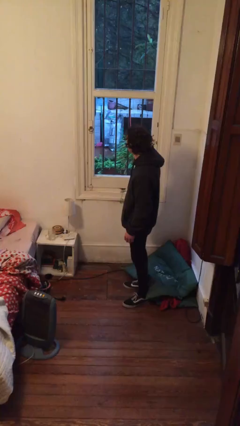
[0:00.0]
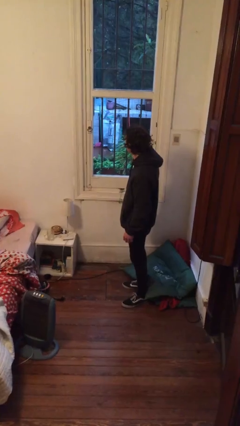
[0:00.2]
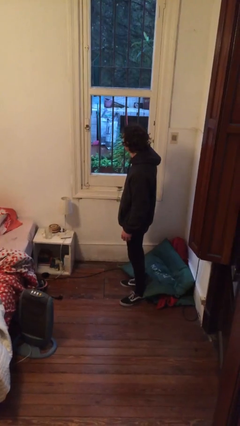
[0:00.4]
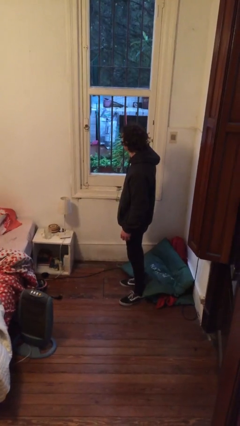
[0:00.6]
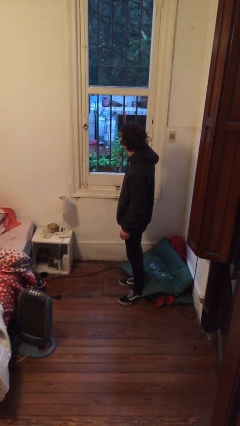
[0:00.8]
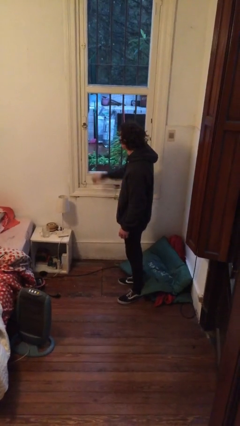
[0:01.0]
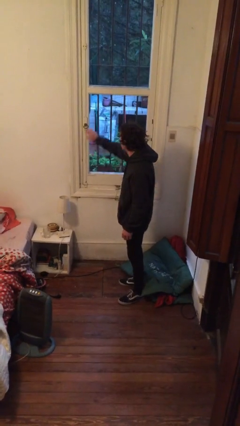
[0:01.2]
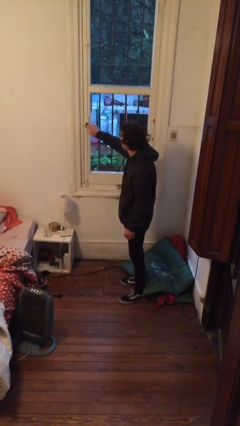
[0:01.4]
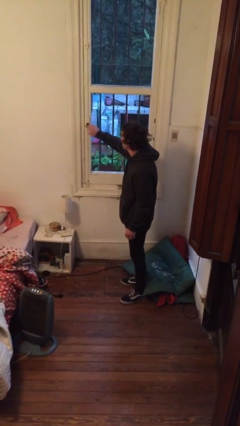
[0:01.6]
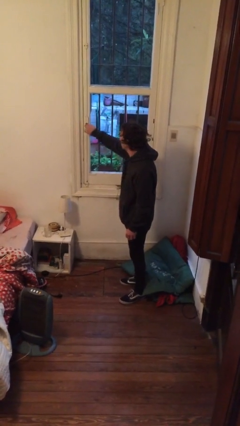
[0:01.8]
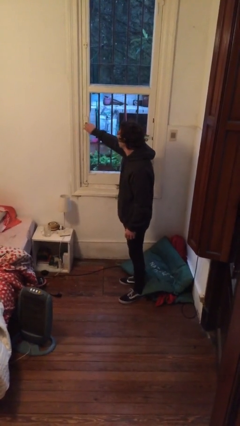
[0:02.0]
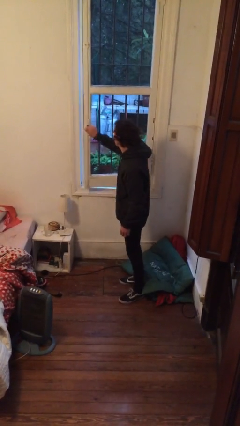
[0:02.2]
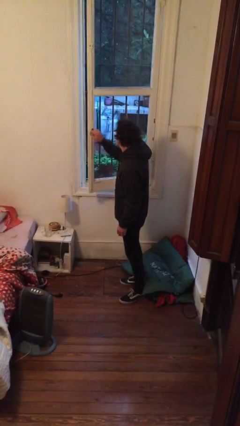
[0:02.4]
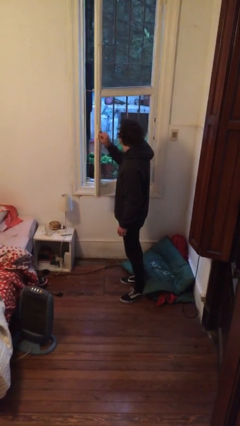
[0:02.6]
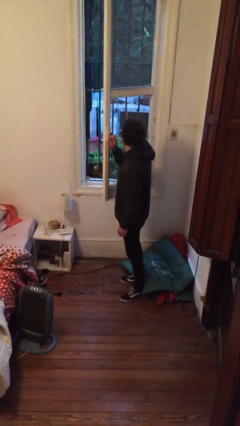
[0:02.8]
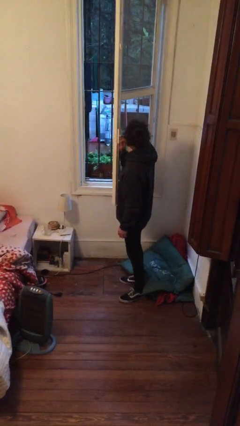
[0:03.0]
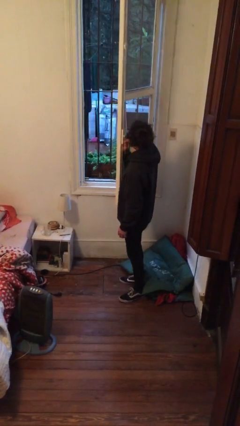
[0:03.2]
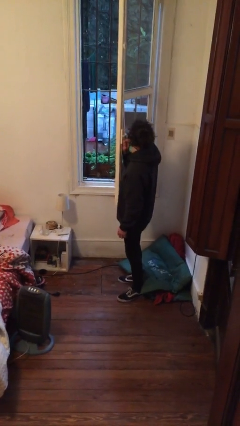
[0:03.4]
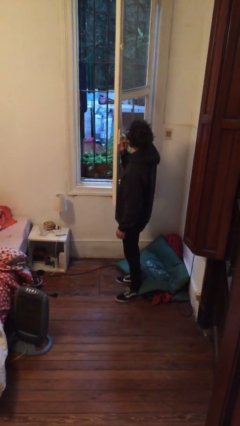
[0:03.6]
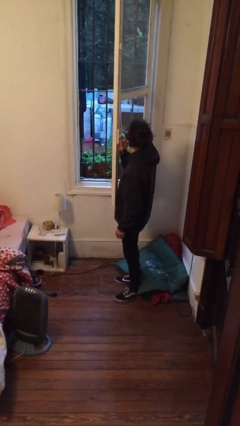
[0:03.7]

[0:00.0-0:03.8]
person opens home window

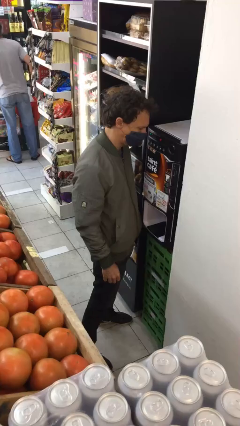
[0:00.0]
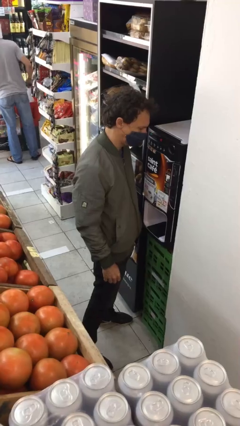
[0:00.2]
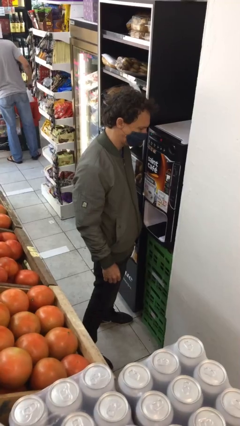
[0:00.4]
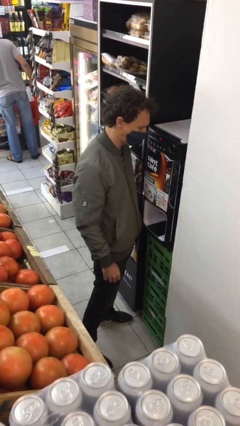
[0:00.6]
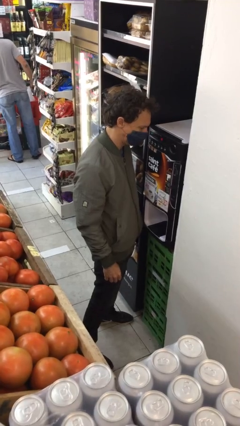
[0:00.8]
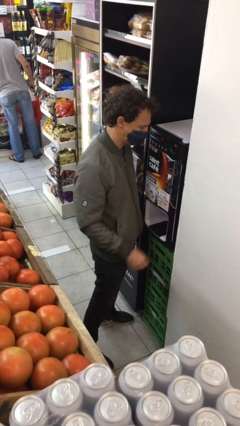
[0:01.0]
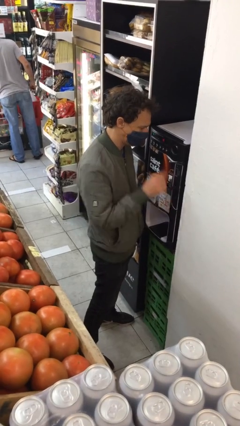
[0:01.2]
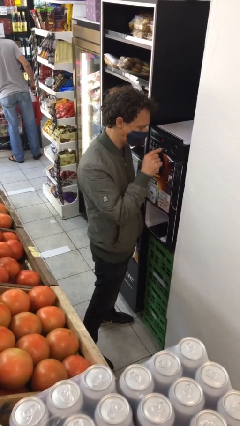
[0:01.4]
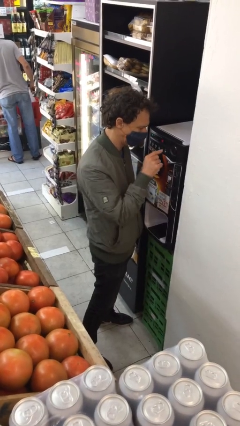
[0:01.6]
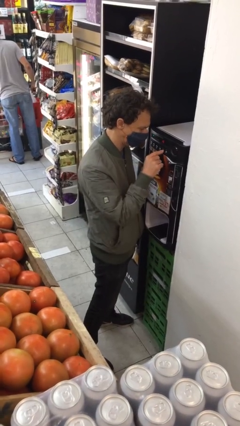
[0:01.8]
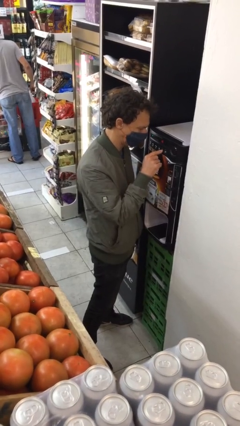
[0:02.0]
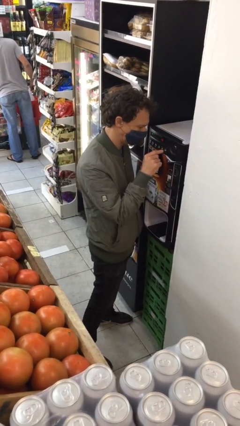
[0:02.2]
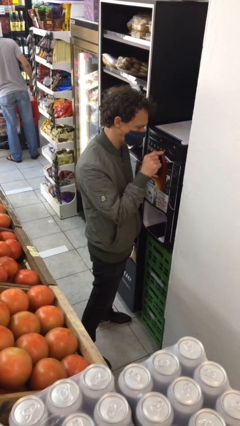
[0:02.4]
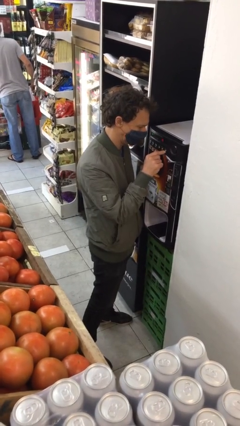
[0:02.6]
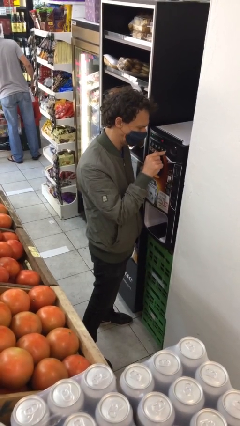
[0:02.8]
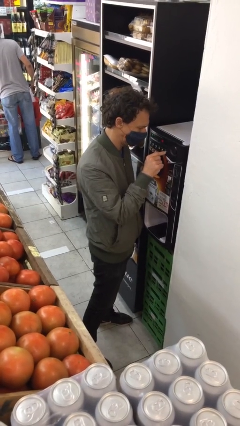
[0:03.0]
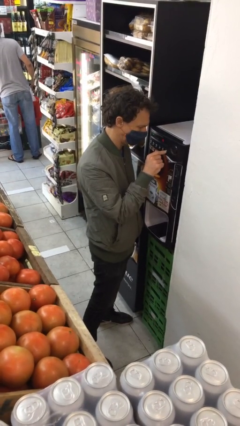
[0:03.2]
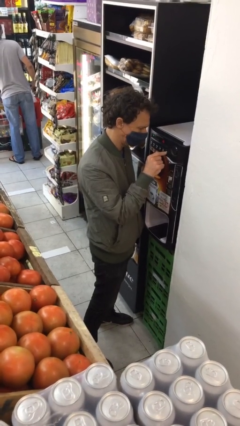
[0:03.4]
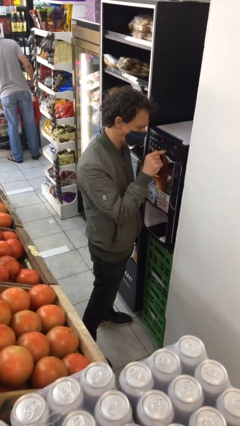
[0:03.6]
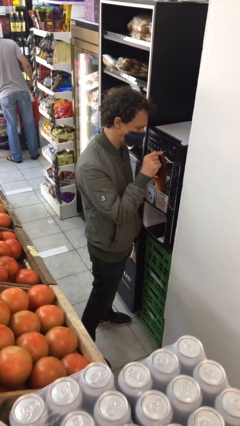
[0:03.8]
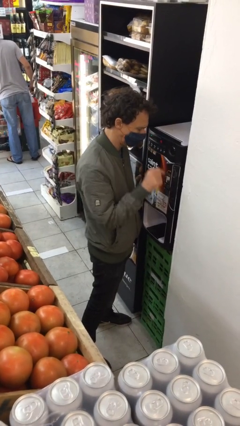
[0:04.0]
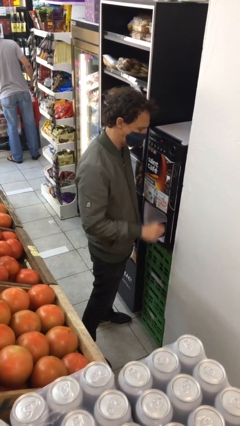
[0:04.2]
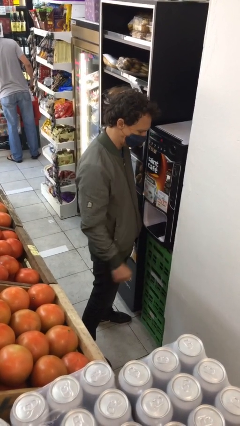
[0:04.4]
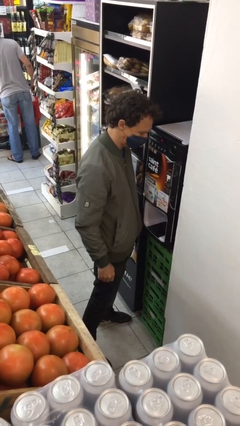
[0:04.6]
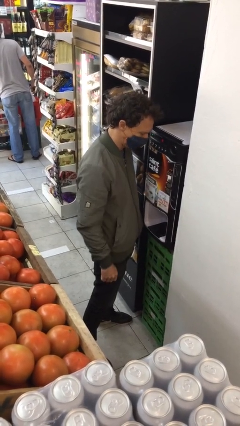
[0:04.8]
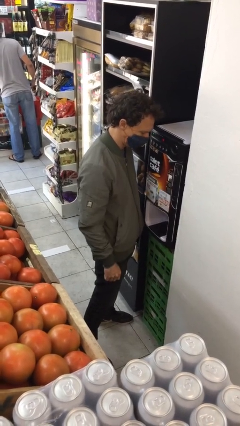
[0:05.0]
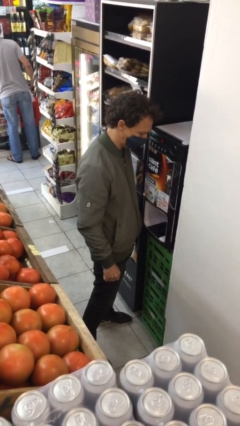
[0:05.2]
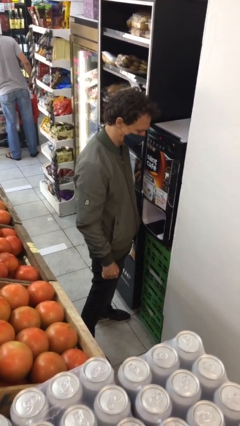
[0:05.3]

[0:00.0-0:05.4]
person purchases from machine

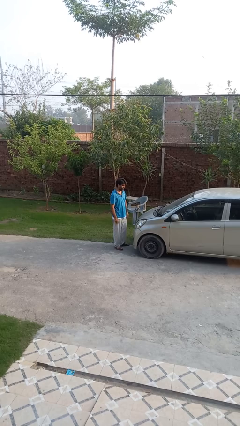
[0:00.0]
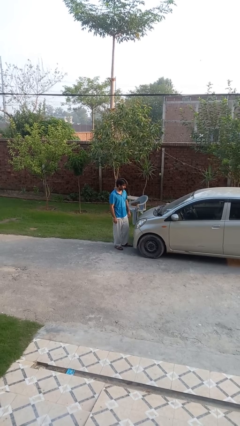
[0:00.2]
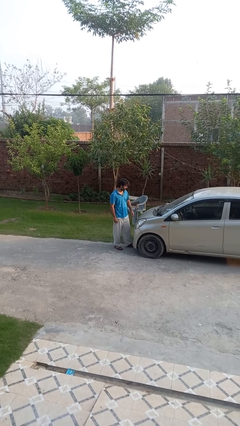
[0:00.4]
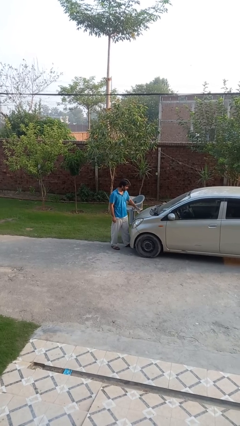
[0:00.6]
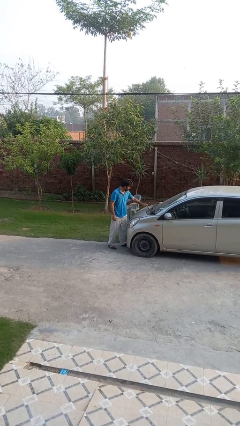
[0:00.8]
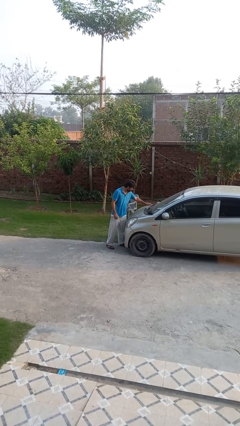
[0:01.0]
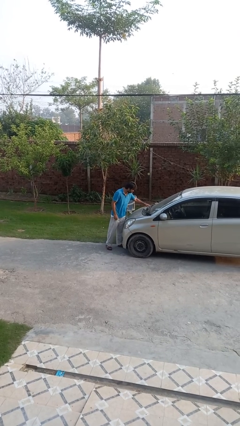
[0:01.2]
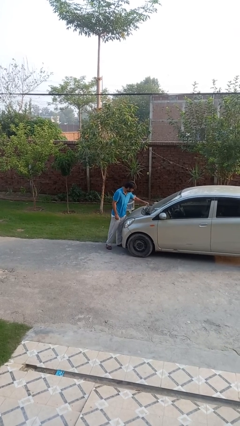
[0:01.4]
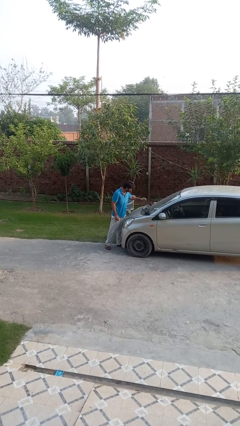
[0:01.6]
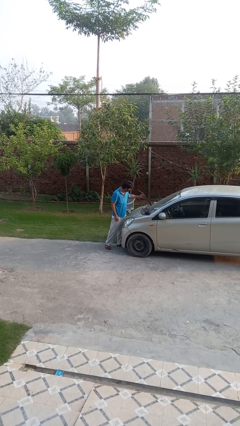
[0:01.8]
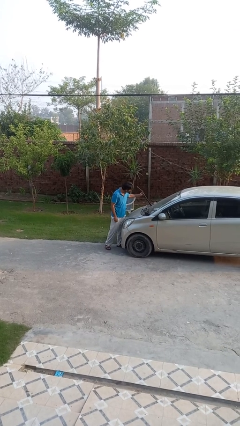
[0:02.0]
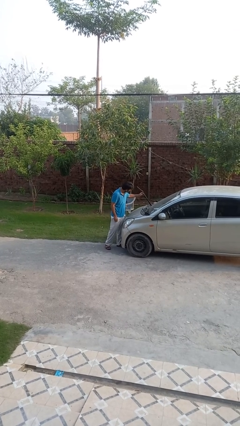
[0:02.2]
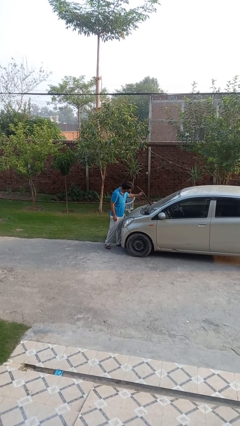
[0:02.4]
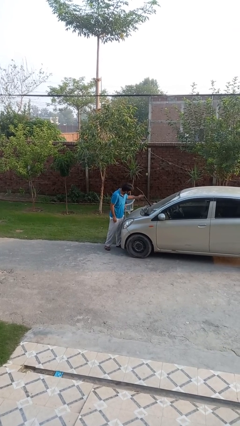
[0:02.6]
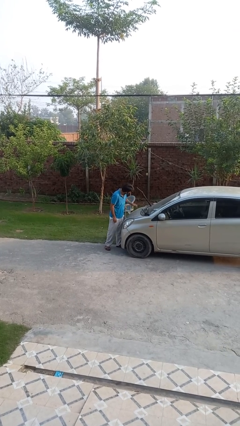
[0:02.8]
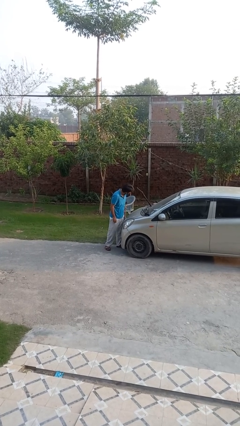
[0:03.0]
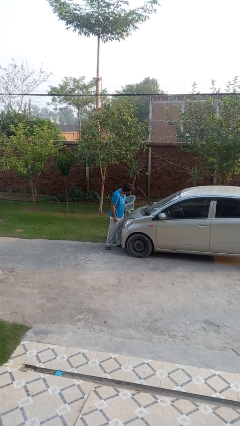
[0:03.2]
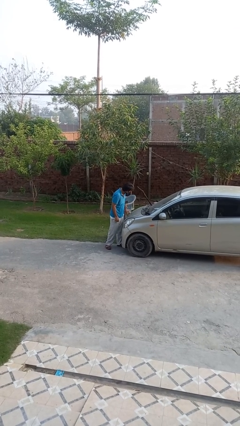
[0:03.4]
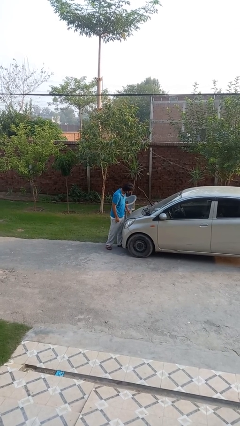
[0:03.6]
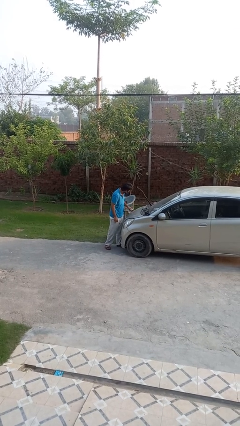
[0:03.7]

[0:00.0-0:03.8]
person flips up car wipers

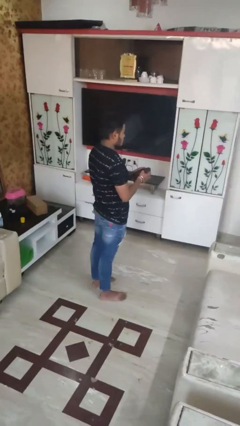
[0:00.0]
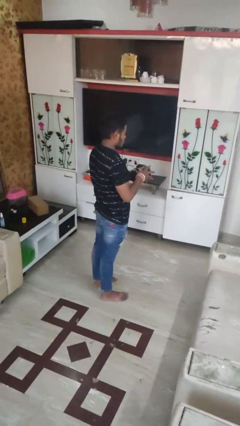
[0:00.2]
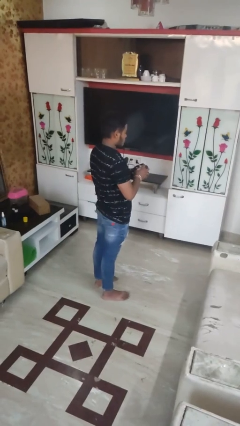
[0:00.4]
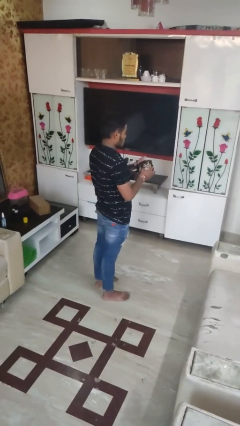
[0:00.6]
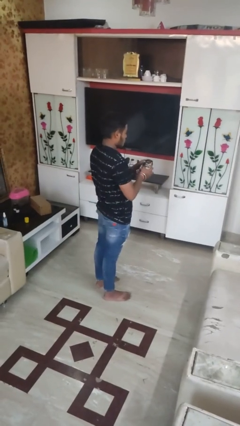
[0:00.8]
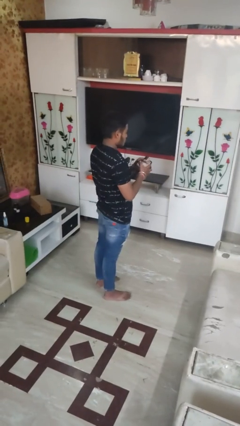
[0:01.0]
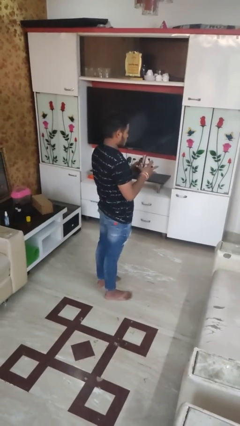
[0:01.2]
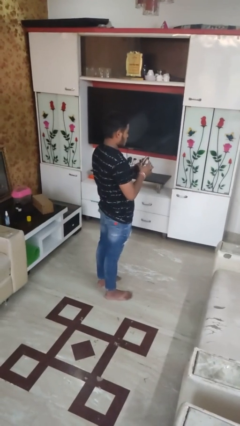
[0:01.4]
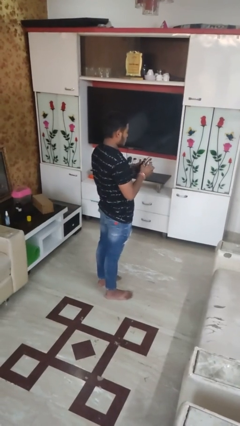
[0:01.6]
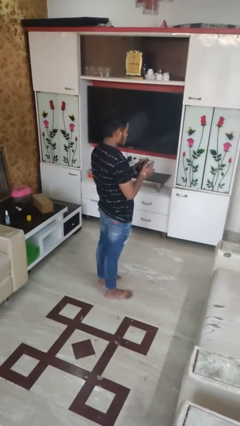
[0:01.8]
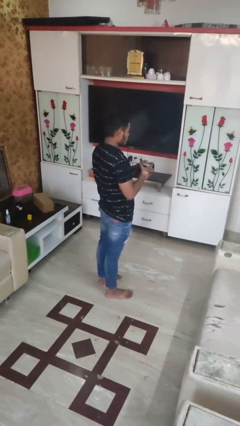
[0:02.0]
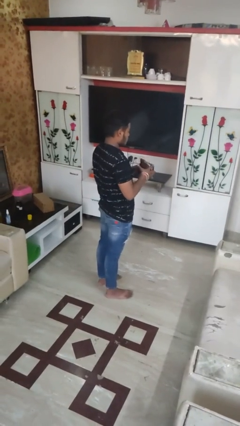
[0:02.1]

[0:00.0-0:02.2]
person squeezes object

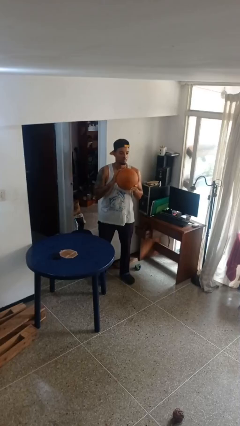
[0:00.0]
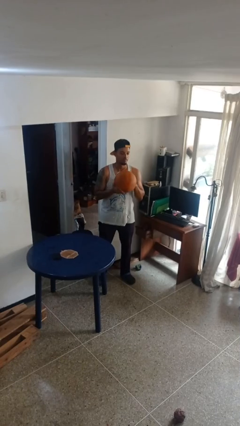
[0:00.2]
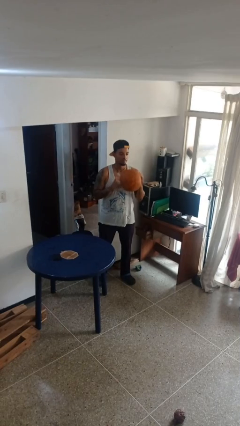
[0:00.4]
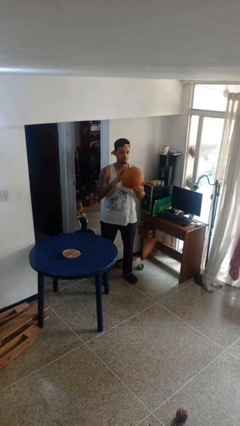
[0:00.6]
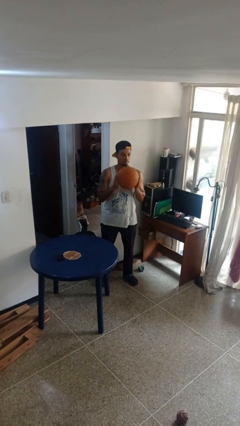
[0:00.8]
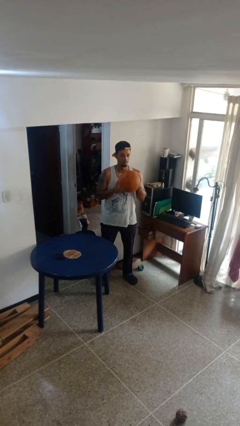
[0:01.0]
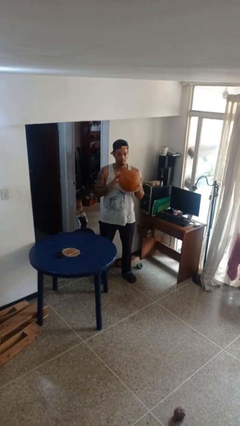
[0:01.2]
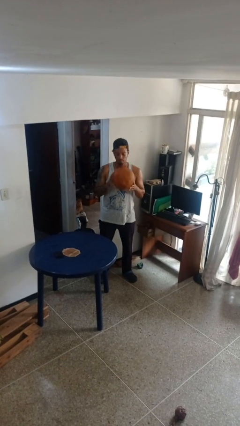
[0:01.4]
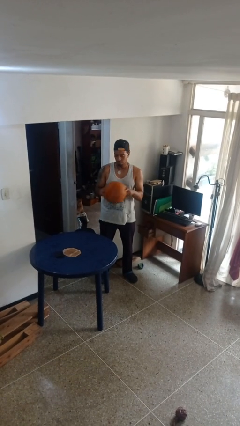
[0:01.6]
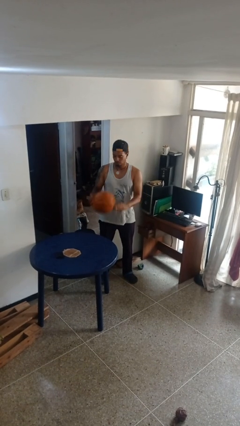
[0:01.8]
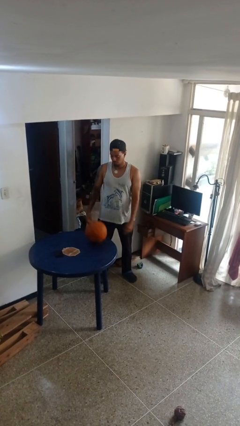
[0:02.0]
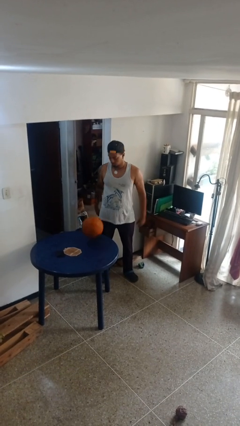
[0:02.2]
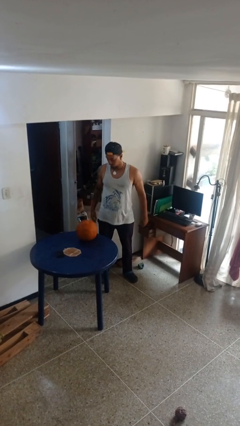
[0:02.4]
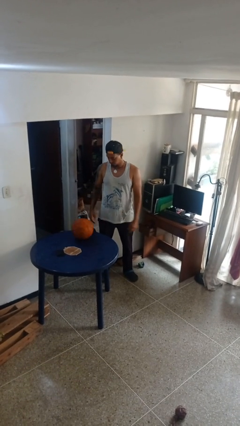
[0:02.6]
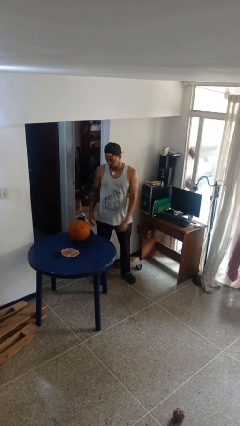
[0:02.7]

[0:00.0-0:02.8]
person throws object on table
